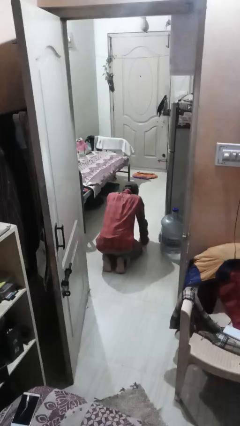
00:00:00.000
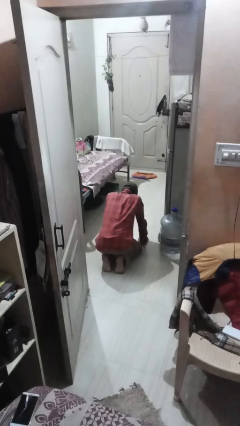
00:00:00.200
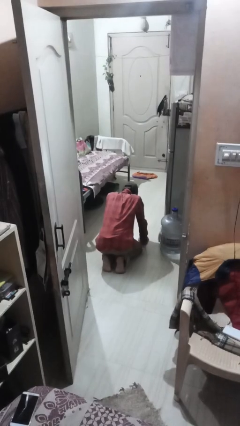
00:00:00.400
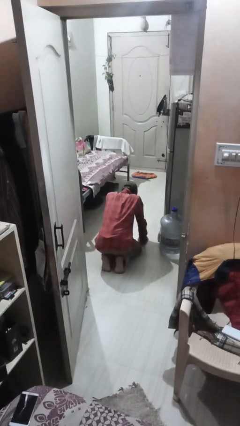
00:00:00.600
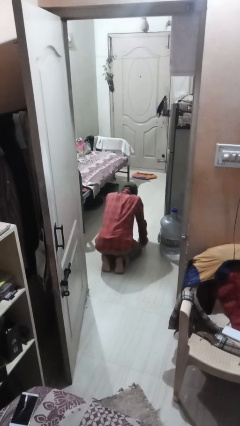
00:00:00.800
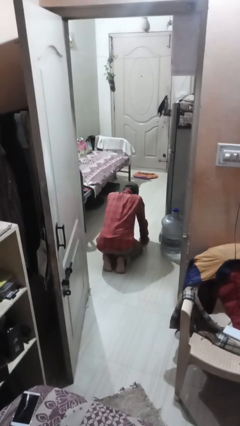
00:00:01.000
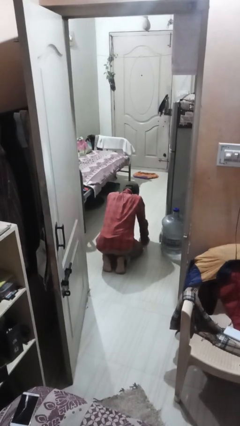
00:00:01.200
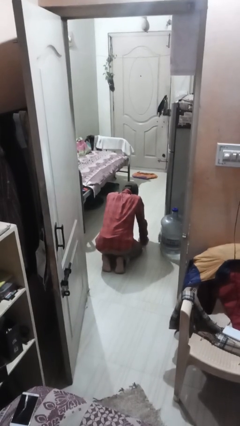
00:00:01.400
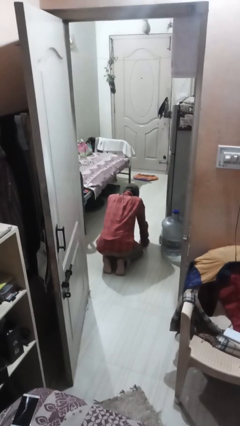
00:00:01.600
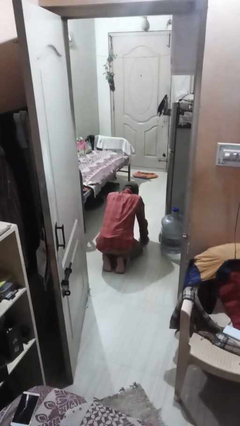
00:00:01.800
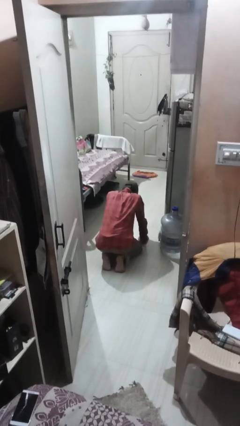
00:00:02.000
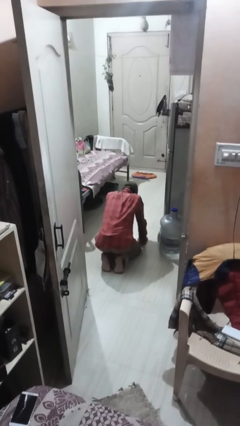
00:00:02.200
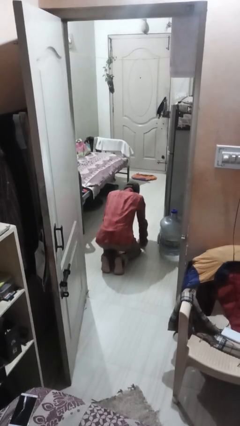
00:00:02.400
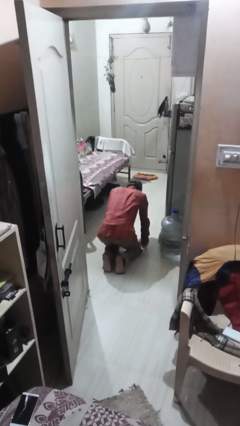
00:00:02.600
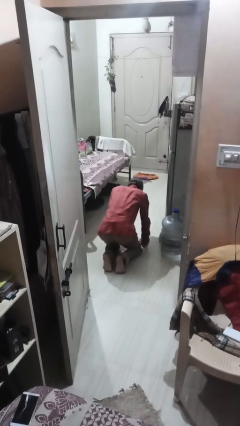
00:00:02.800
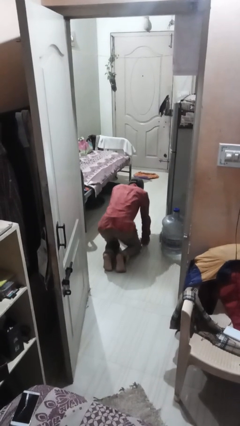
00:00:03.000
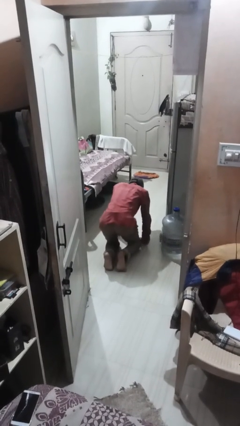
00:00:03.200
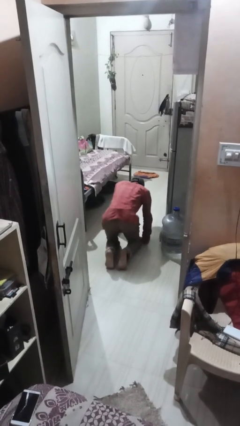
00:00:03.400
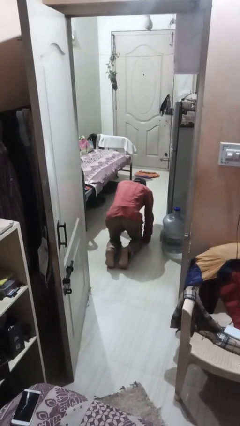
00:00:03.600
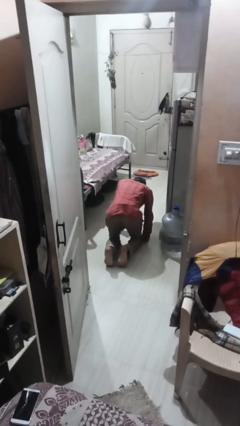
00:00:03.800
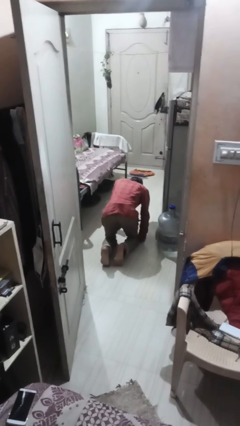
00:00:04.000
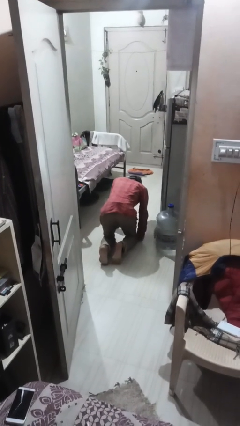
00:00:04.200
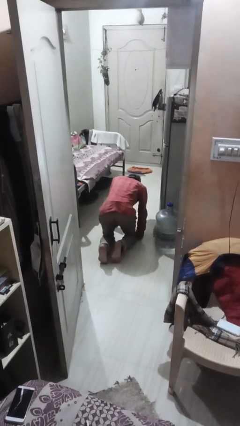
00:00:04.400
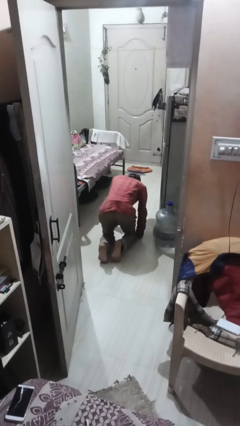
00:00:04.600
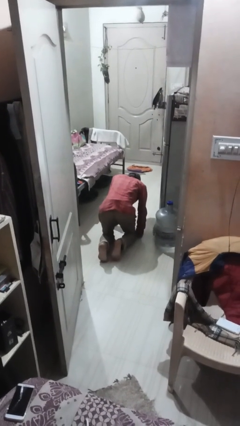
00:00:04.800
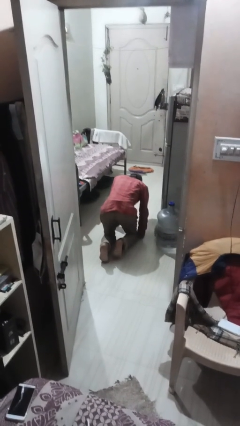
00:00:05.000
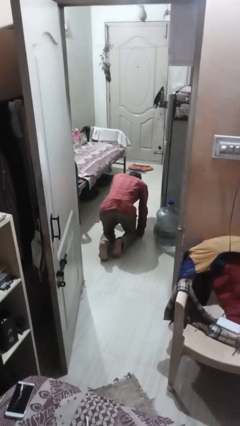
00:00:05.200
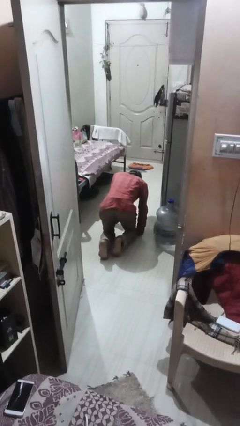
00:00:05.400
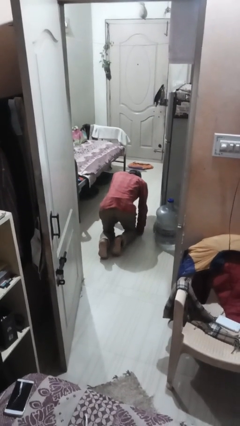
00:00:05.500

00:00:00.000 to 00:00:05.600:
person crawls

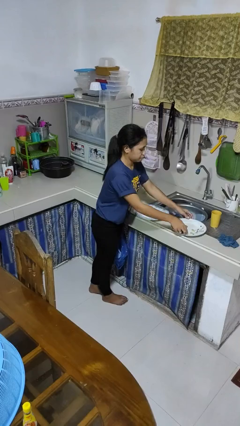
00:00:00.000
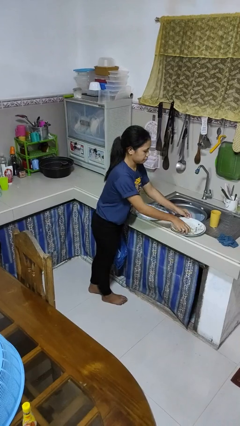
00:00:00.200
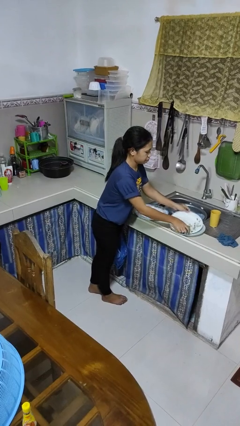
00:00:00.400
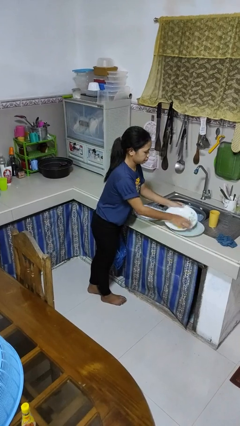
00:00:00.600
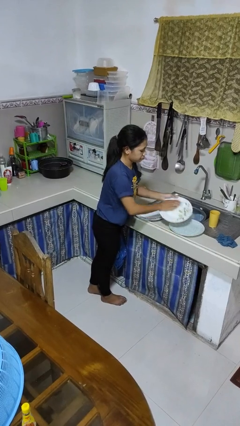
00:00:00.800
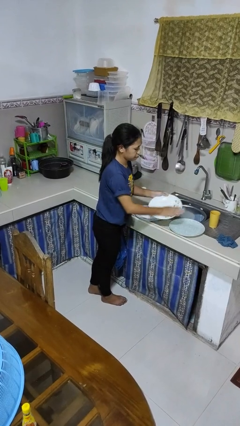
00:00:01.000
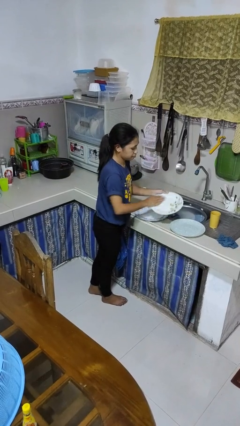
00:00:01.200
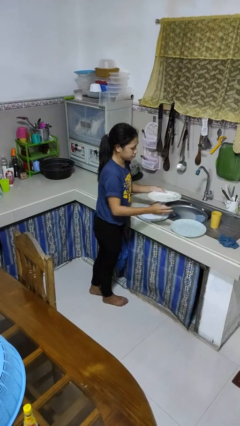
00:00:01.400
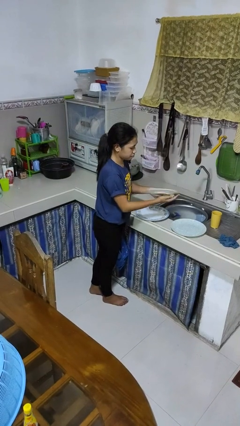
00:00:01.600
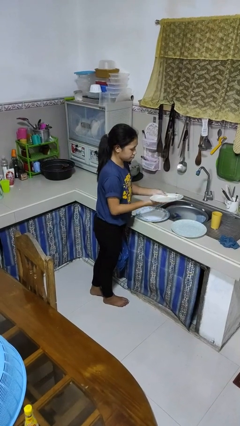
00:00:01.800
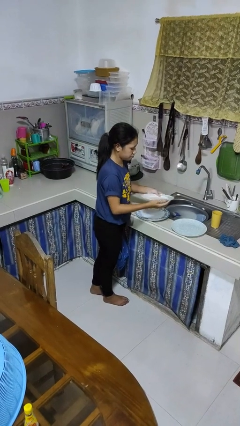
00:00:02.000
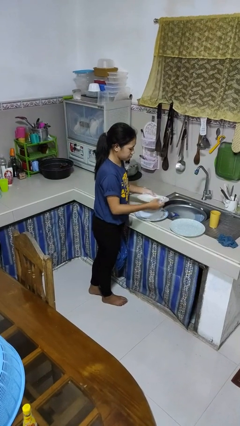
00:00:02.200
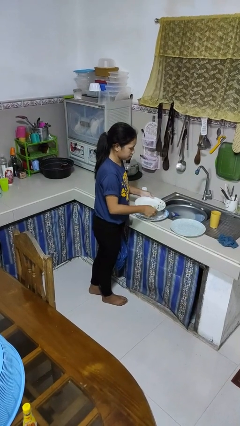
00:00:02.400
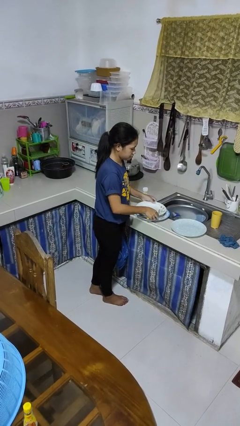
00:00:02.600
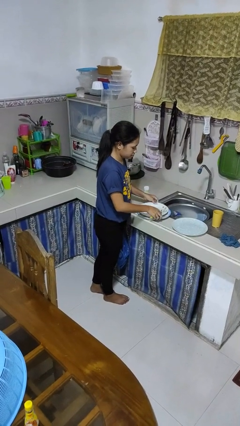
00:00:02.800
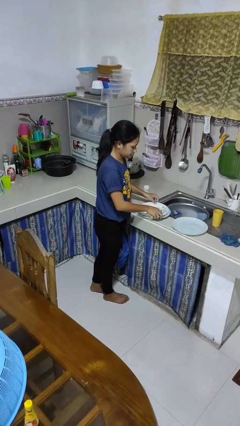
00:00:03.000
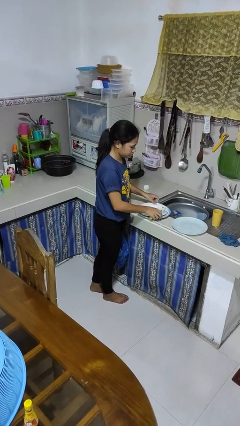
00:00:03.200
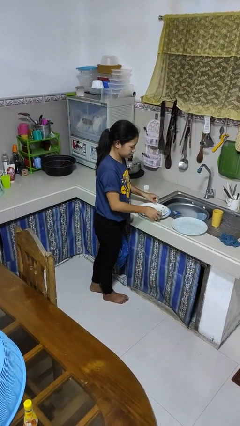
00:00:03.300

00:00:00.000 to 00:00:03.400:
person washes dish

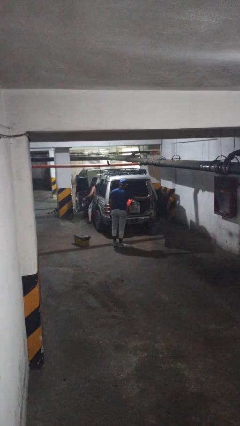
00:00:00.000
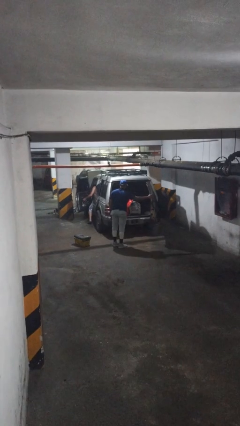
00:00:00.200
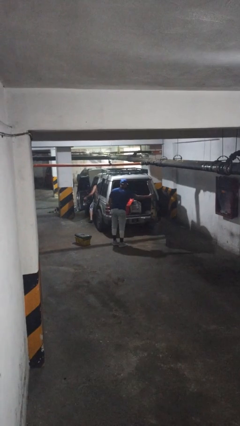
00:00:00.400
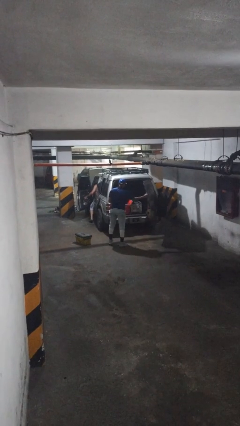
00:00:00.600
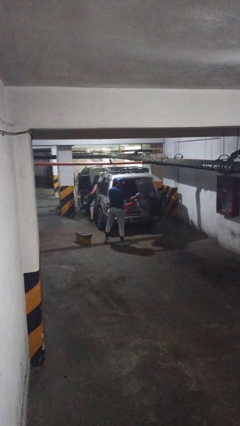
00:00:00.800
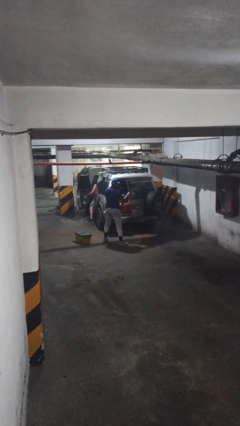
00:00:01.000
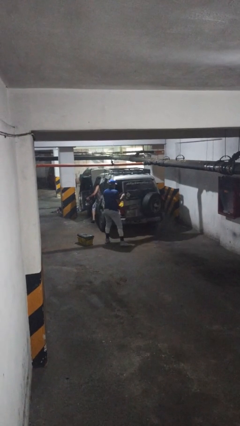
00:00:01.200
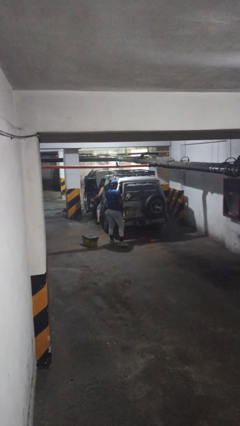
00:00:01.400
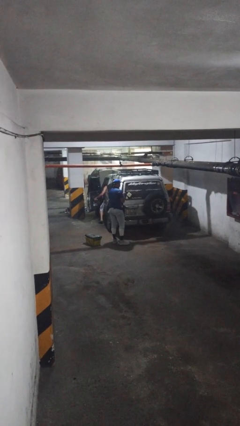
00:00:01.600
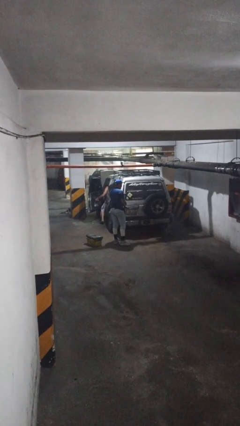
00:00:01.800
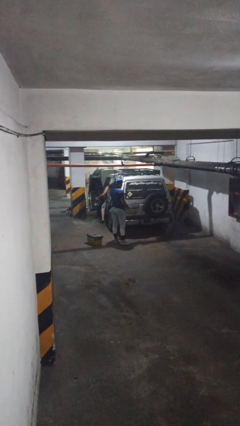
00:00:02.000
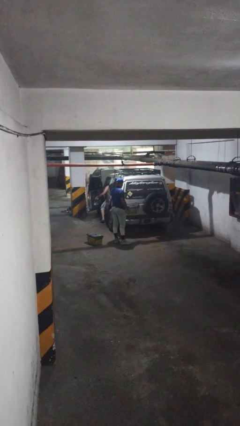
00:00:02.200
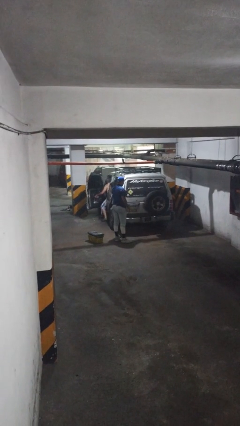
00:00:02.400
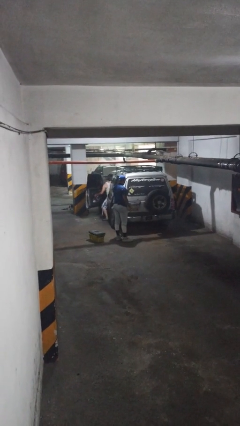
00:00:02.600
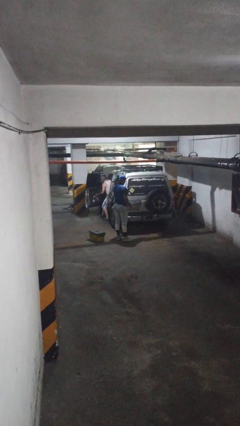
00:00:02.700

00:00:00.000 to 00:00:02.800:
person closes car trunk

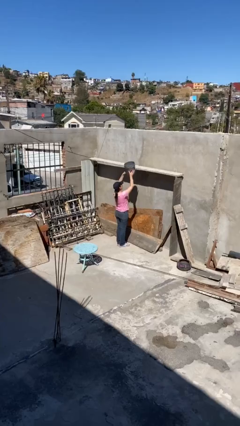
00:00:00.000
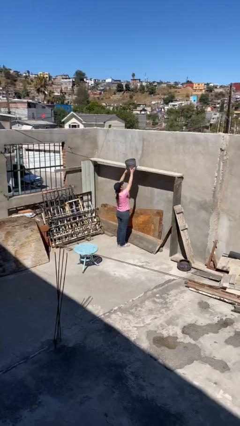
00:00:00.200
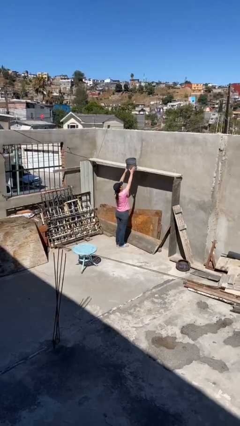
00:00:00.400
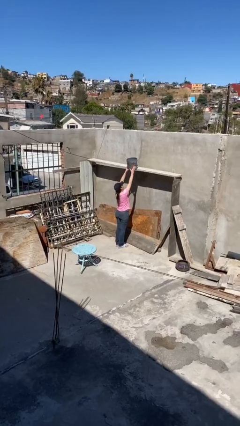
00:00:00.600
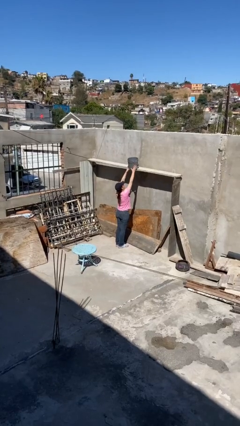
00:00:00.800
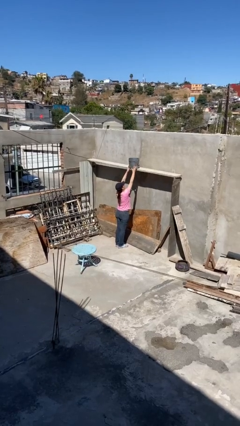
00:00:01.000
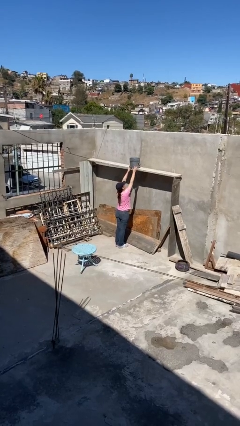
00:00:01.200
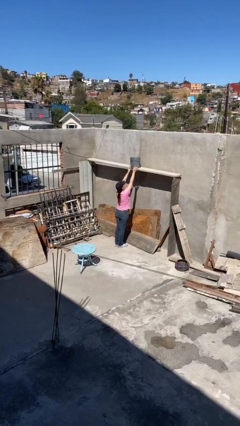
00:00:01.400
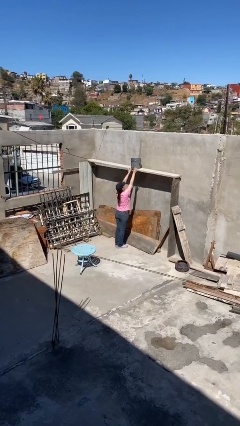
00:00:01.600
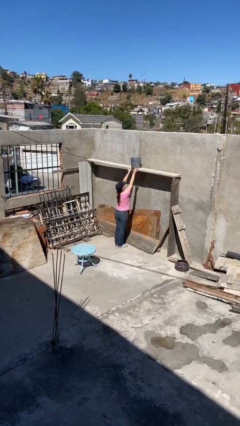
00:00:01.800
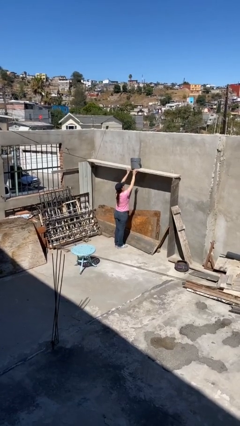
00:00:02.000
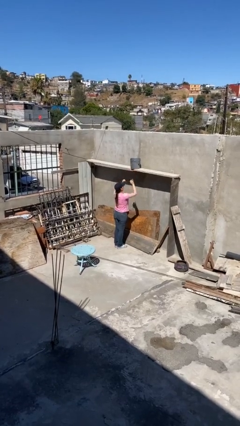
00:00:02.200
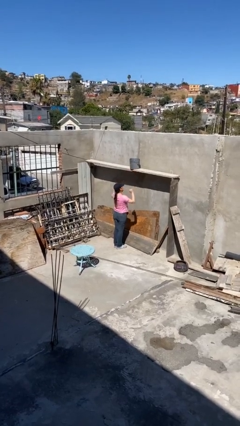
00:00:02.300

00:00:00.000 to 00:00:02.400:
person puts down object on shelf

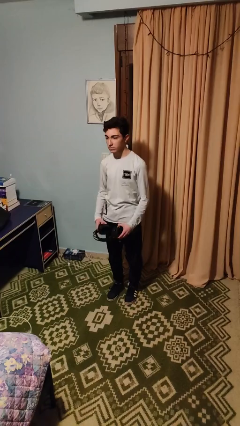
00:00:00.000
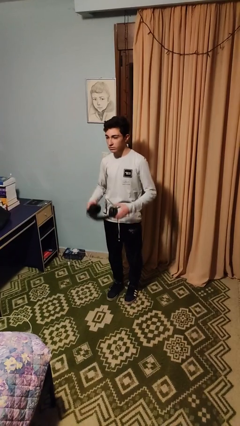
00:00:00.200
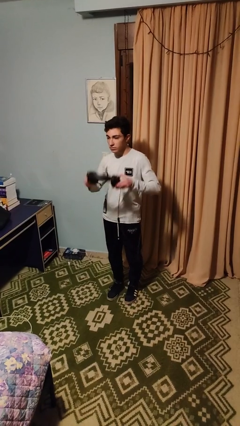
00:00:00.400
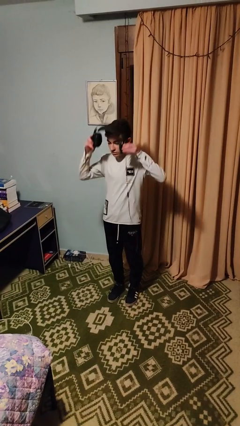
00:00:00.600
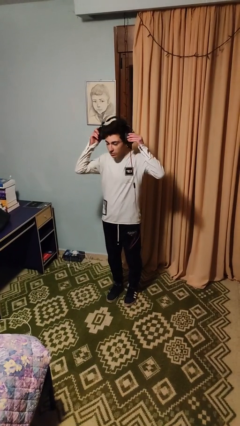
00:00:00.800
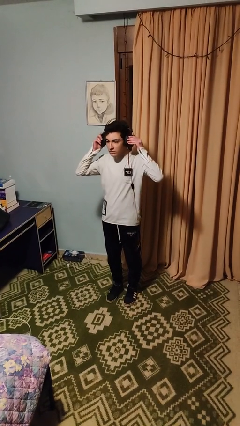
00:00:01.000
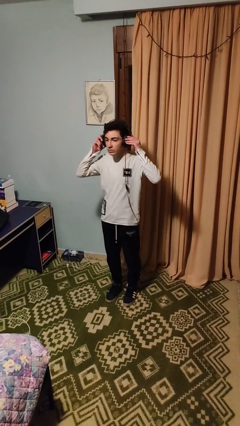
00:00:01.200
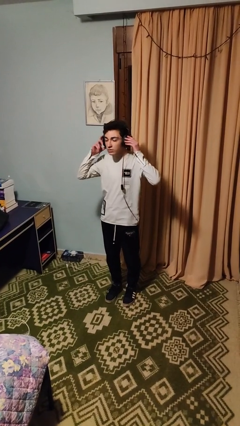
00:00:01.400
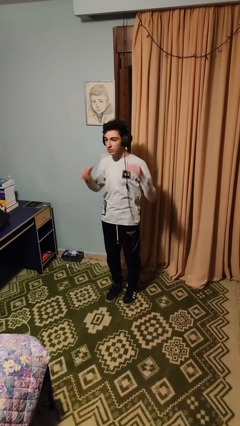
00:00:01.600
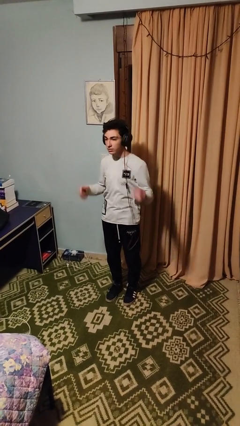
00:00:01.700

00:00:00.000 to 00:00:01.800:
person puts on headphones

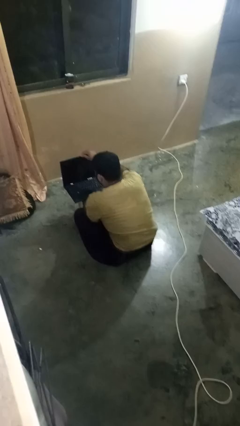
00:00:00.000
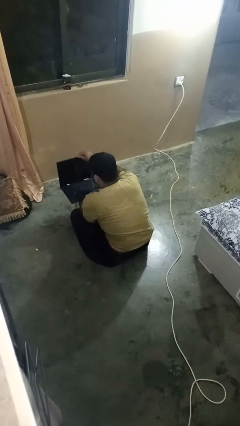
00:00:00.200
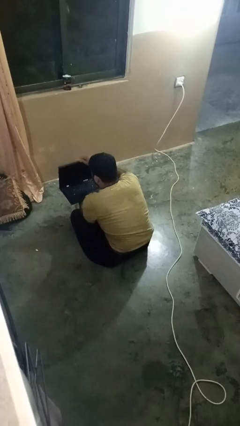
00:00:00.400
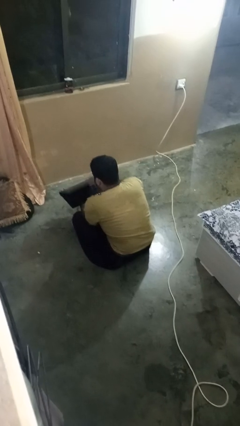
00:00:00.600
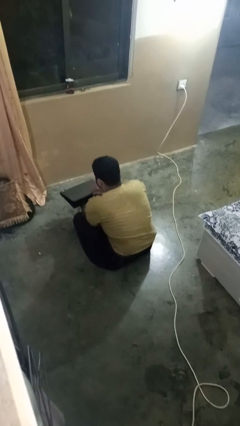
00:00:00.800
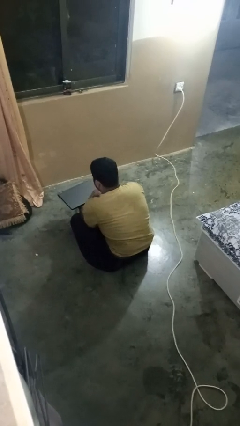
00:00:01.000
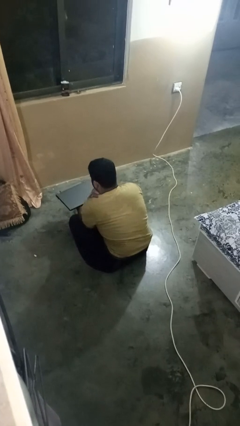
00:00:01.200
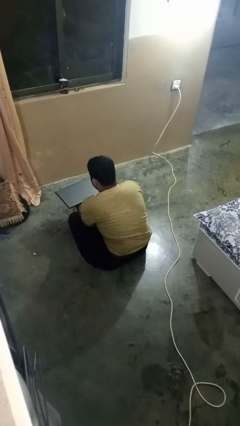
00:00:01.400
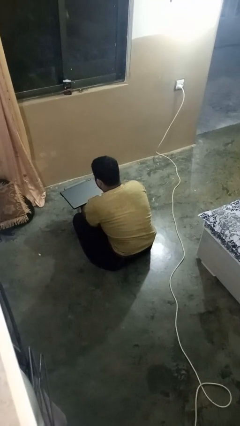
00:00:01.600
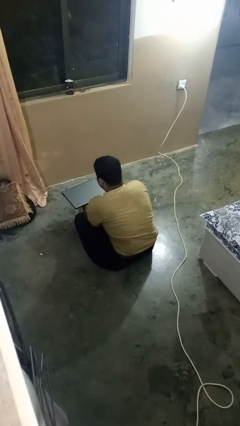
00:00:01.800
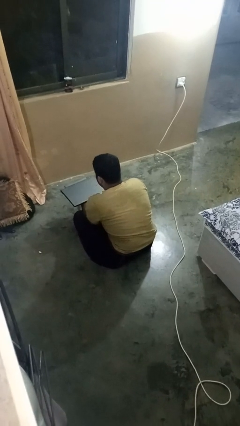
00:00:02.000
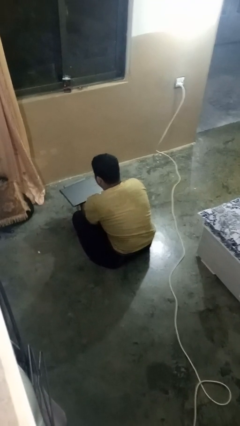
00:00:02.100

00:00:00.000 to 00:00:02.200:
person closes laptop
